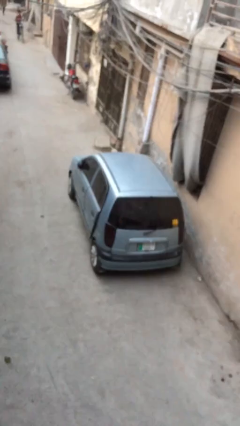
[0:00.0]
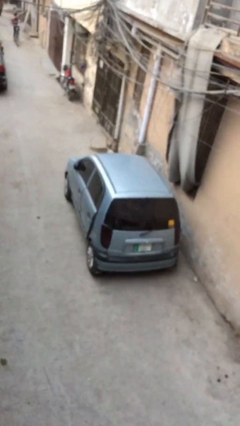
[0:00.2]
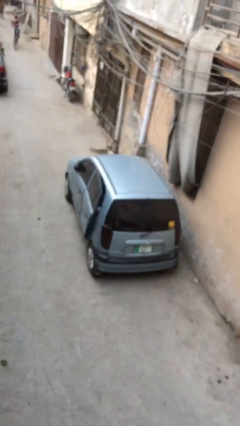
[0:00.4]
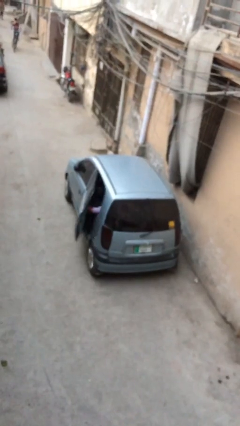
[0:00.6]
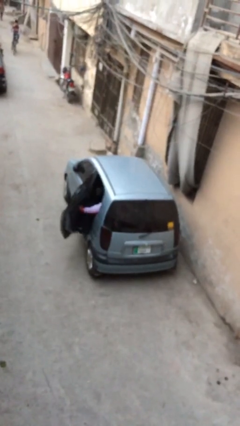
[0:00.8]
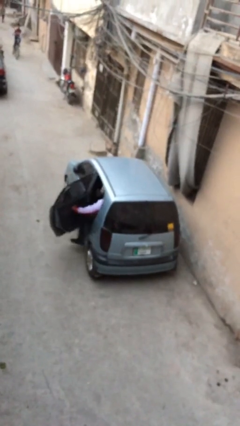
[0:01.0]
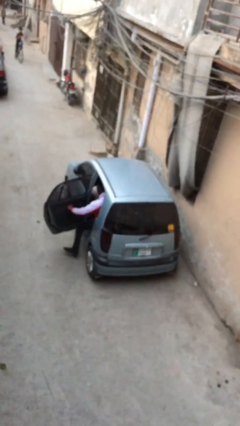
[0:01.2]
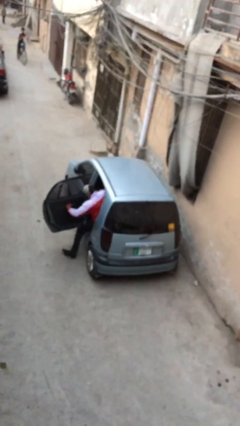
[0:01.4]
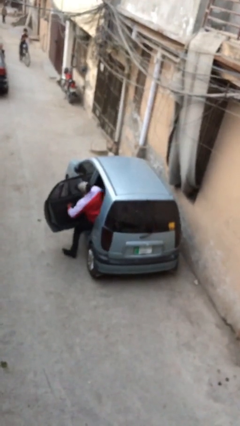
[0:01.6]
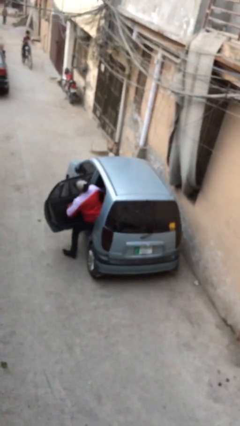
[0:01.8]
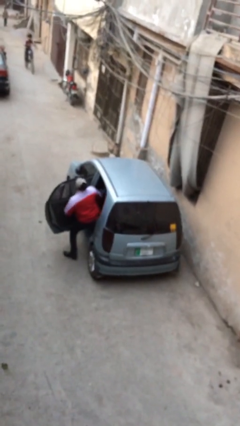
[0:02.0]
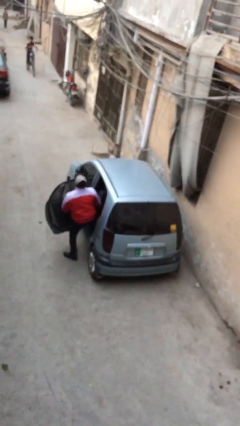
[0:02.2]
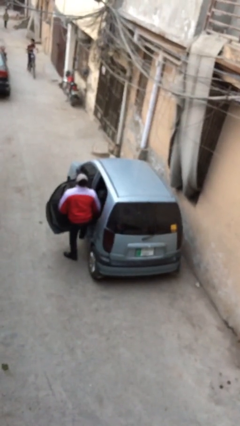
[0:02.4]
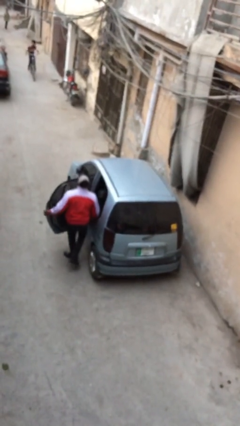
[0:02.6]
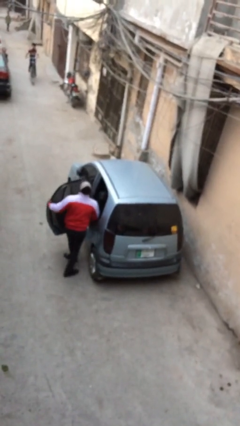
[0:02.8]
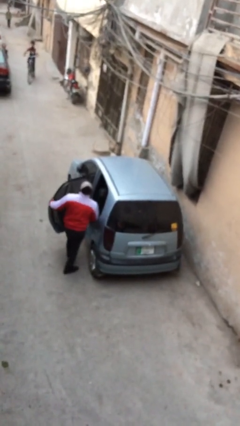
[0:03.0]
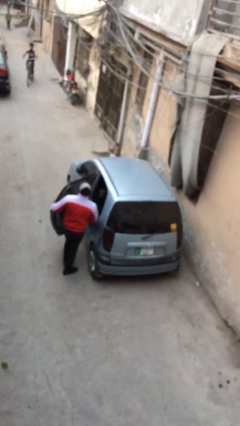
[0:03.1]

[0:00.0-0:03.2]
car drops off person

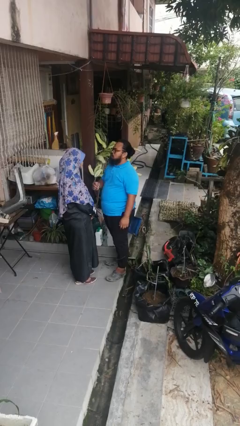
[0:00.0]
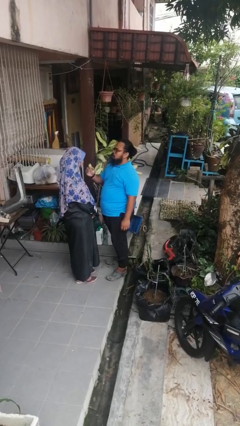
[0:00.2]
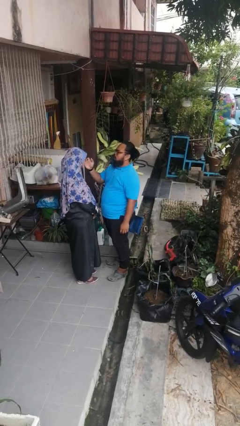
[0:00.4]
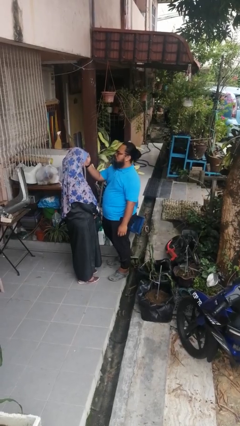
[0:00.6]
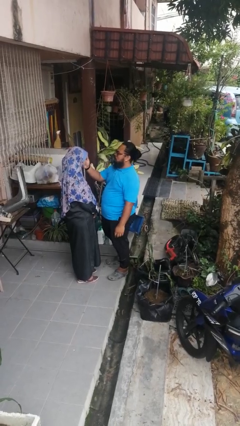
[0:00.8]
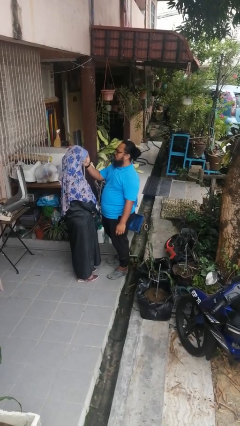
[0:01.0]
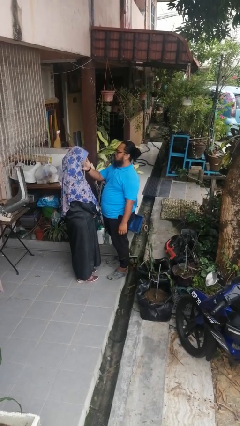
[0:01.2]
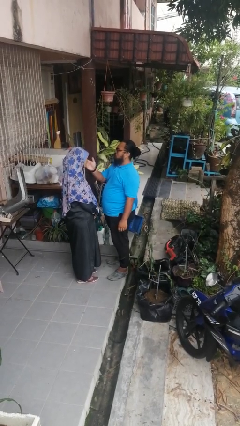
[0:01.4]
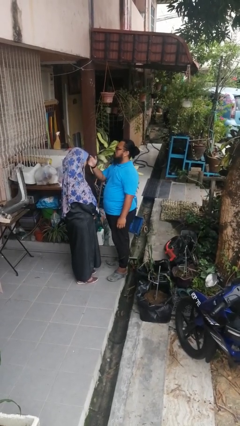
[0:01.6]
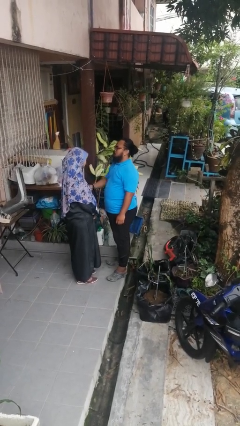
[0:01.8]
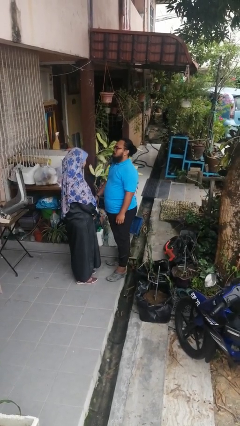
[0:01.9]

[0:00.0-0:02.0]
person touches face of person

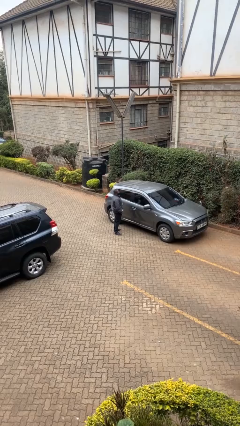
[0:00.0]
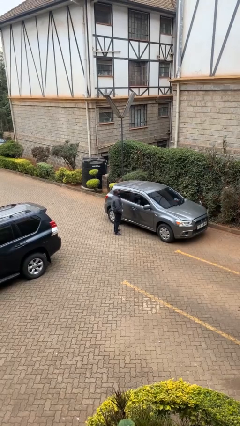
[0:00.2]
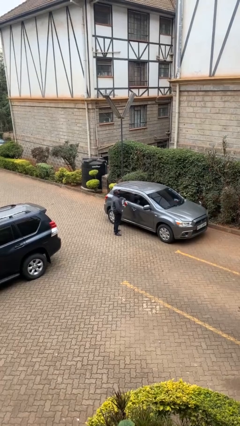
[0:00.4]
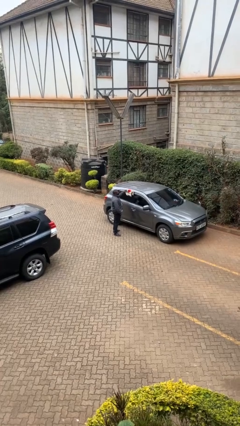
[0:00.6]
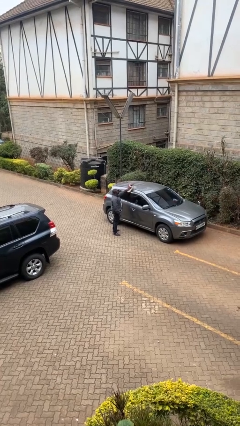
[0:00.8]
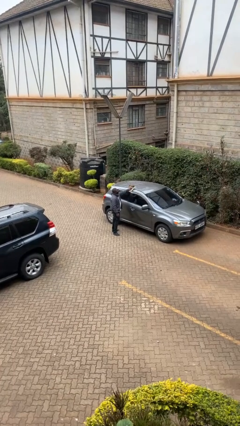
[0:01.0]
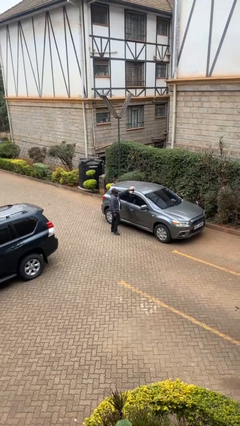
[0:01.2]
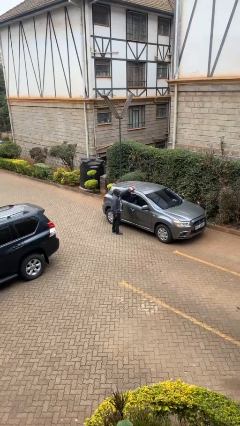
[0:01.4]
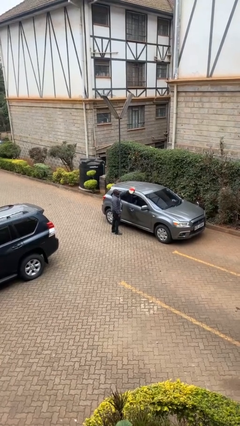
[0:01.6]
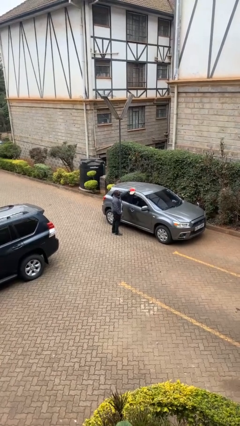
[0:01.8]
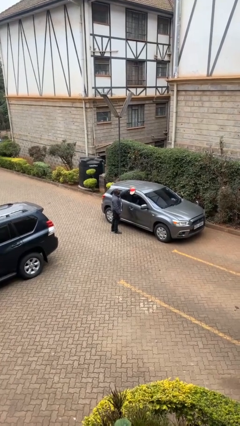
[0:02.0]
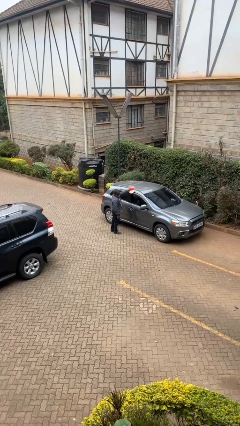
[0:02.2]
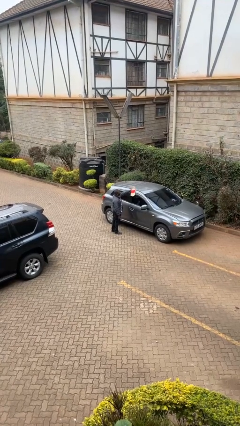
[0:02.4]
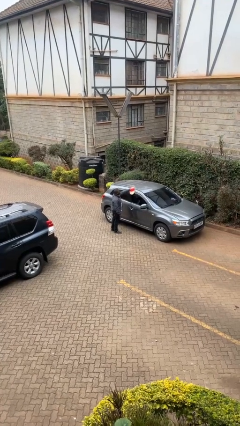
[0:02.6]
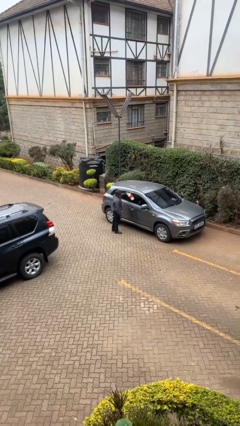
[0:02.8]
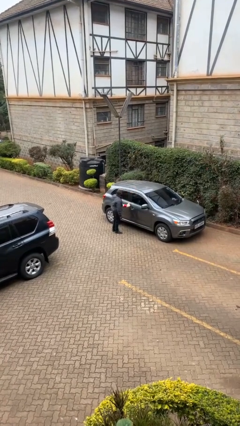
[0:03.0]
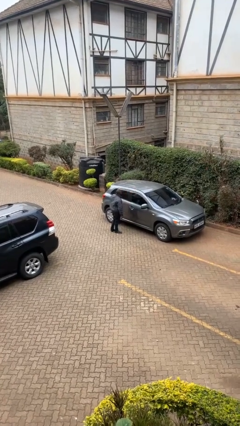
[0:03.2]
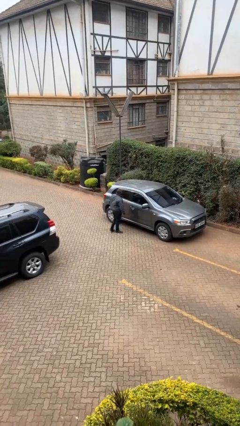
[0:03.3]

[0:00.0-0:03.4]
person polishes car with rag

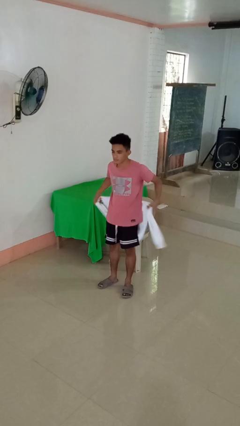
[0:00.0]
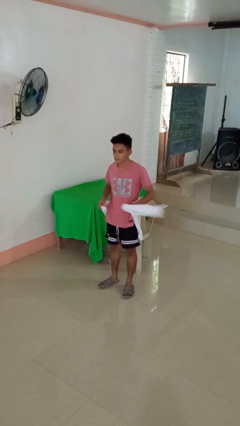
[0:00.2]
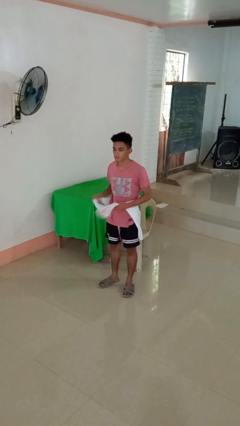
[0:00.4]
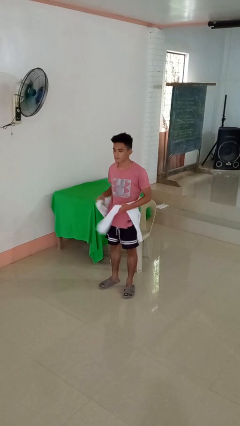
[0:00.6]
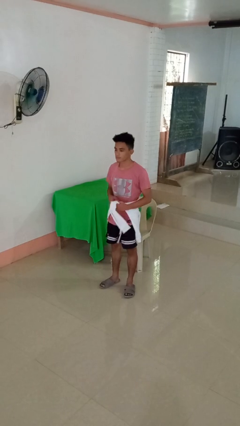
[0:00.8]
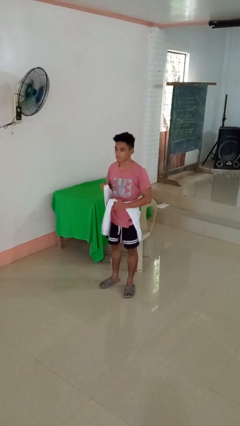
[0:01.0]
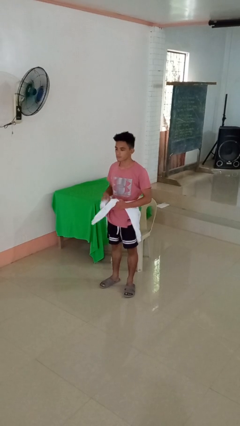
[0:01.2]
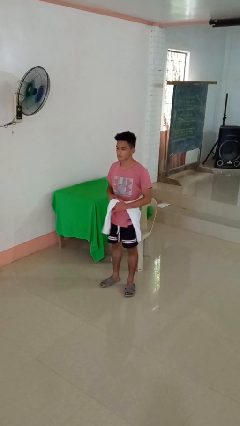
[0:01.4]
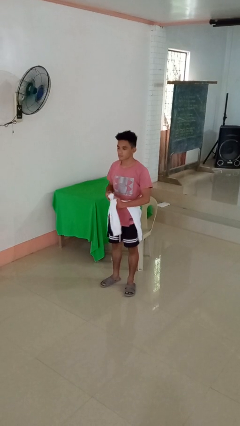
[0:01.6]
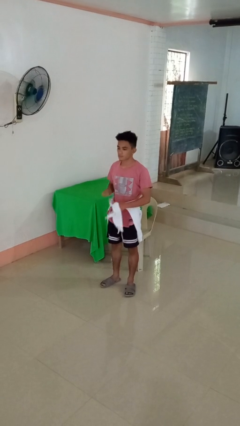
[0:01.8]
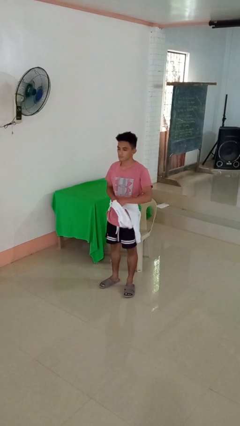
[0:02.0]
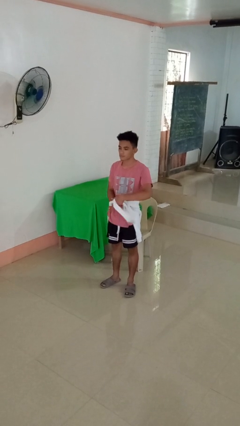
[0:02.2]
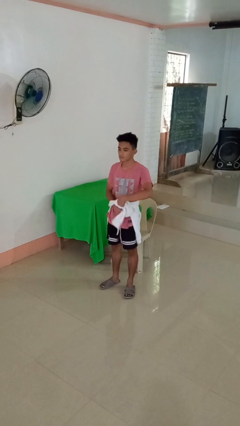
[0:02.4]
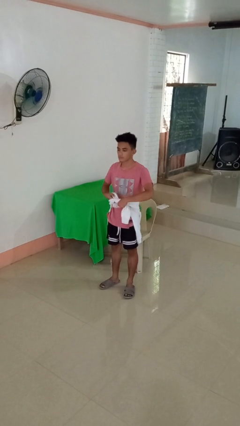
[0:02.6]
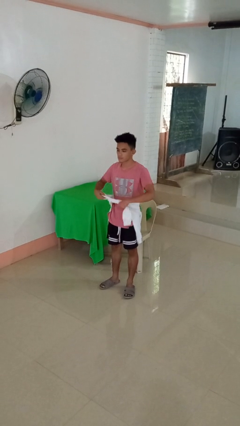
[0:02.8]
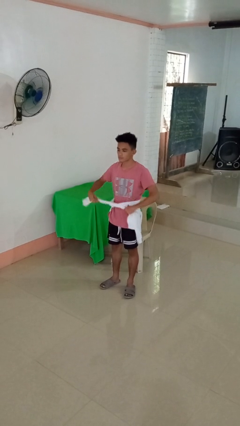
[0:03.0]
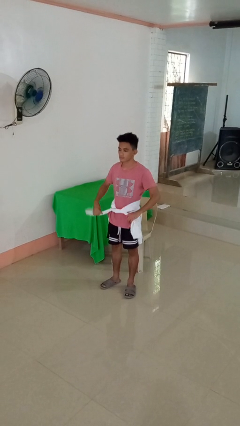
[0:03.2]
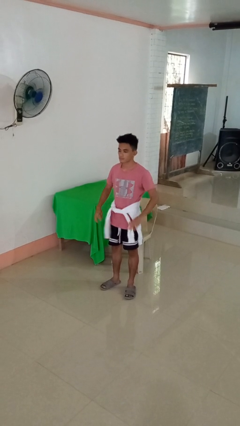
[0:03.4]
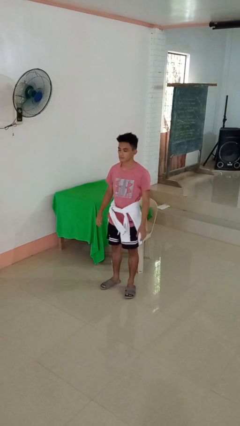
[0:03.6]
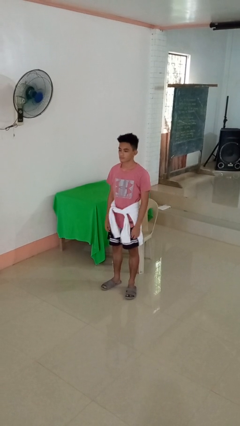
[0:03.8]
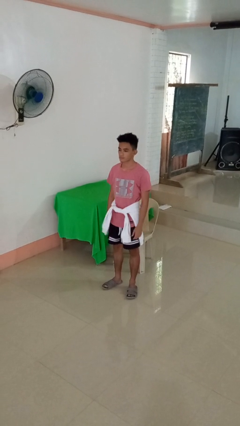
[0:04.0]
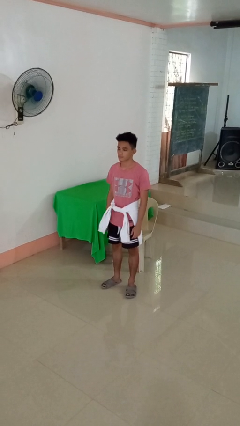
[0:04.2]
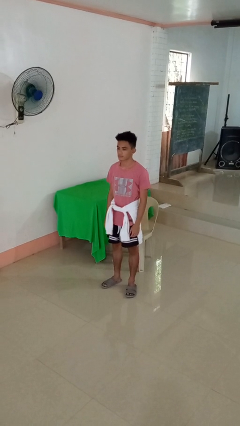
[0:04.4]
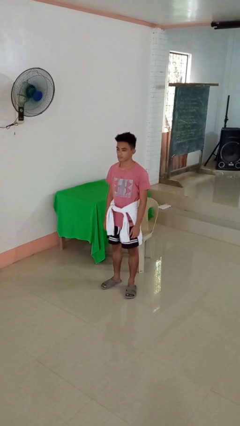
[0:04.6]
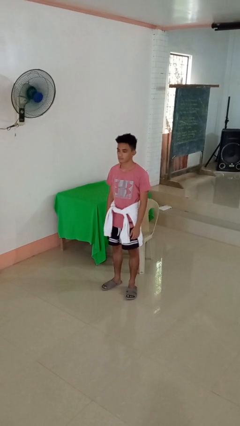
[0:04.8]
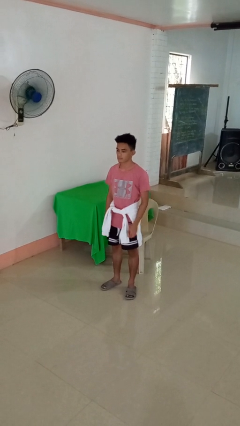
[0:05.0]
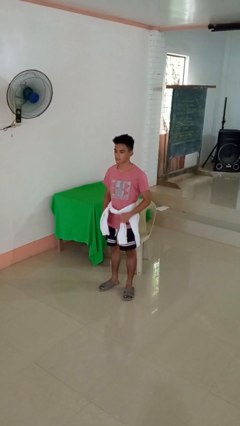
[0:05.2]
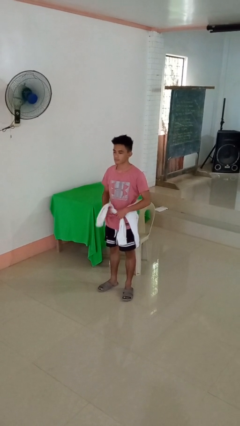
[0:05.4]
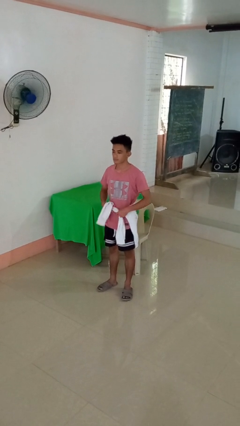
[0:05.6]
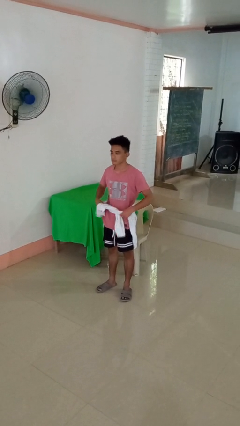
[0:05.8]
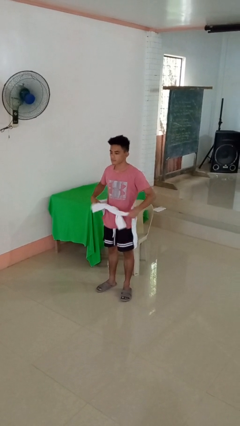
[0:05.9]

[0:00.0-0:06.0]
person ties jacket around waist

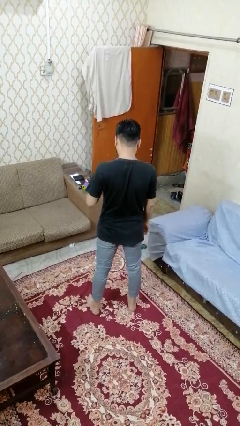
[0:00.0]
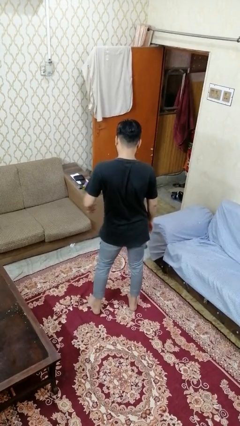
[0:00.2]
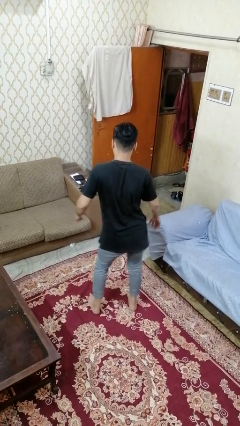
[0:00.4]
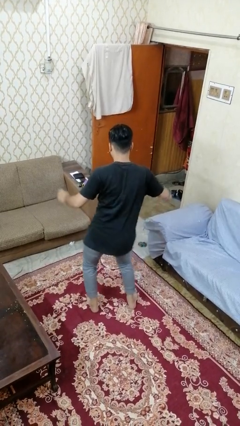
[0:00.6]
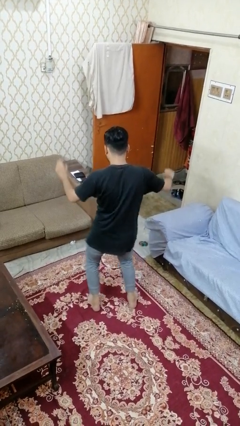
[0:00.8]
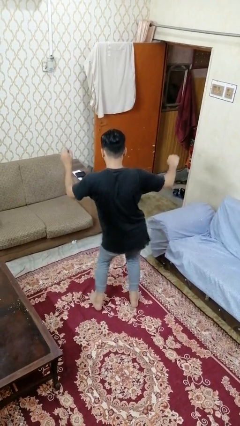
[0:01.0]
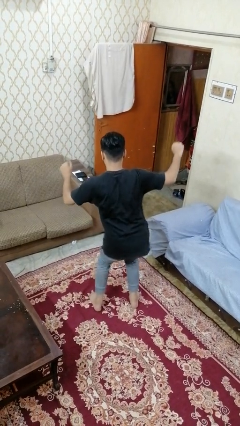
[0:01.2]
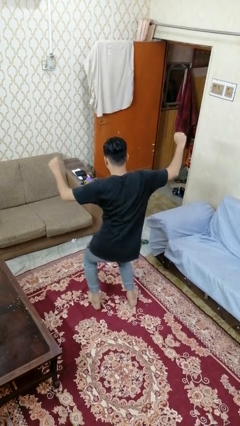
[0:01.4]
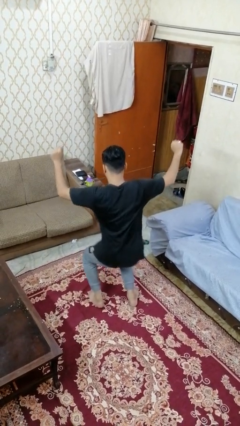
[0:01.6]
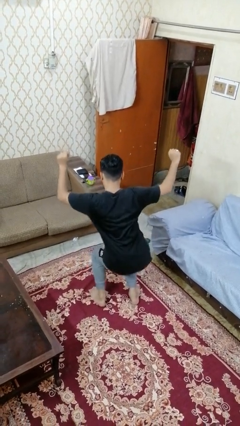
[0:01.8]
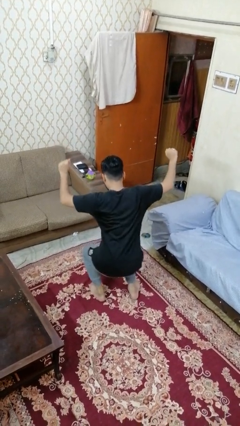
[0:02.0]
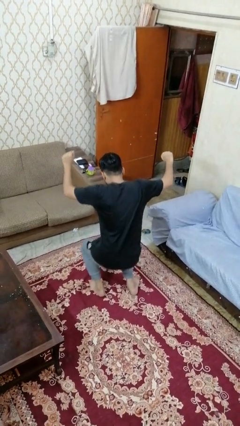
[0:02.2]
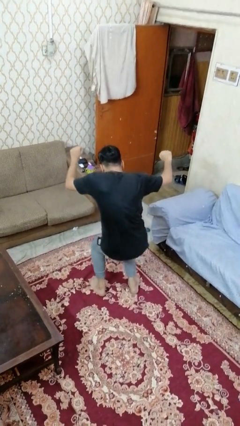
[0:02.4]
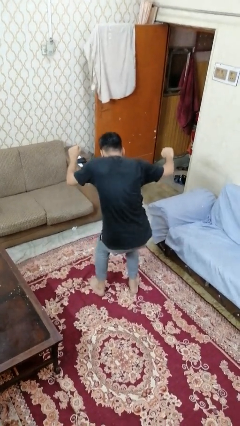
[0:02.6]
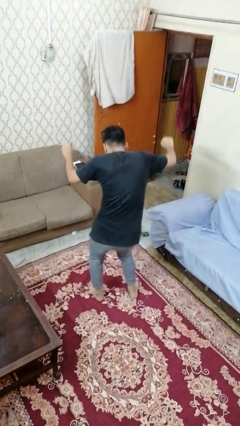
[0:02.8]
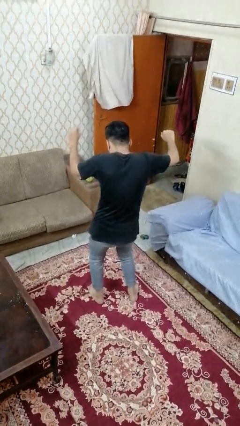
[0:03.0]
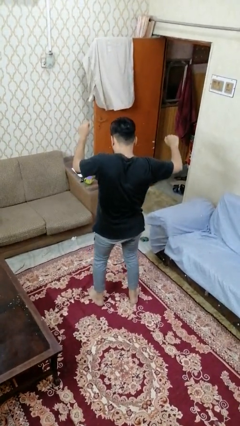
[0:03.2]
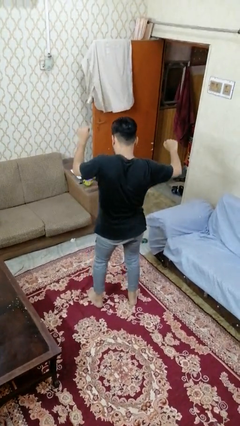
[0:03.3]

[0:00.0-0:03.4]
person dances in place
